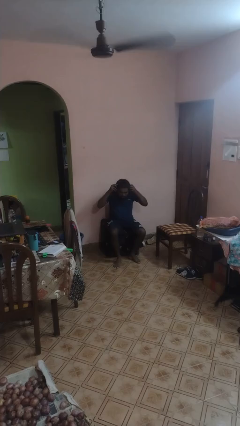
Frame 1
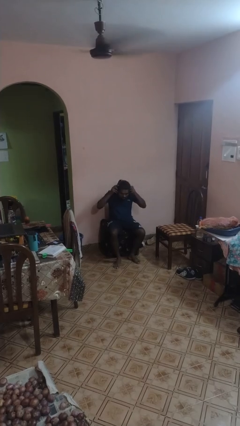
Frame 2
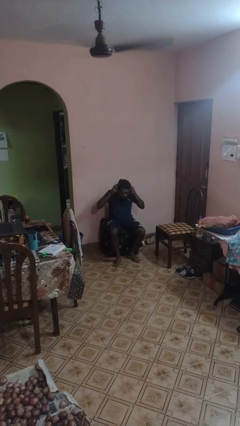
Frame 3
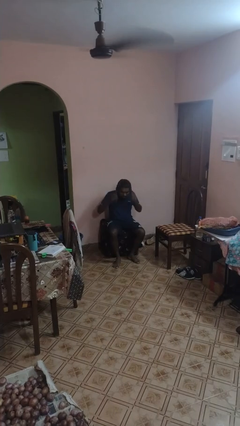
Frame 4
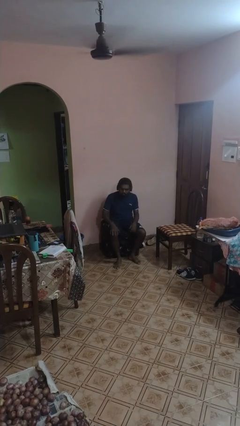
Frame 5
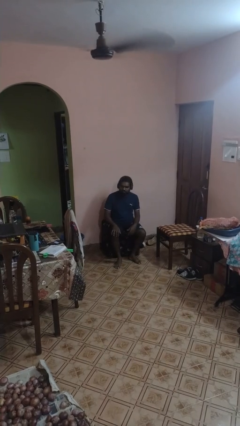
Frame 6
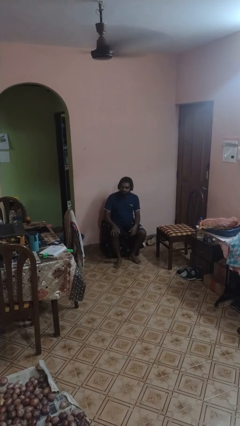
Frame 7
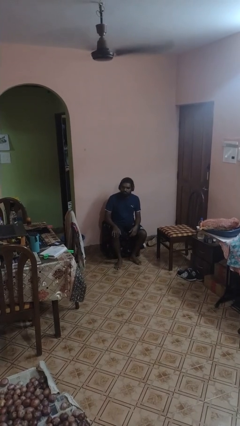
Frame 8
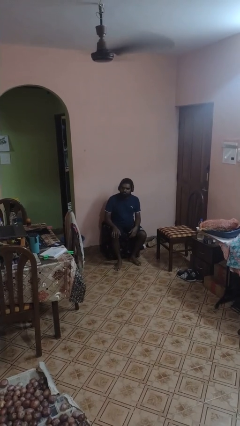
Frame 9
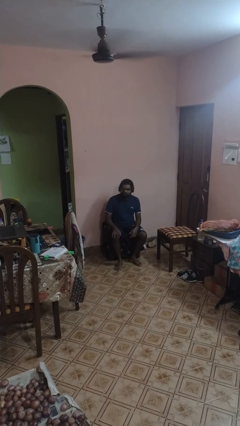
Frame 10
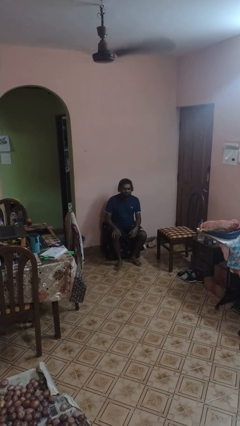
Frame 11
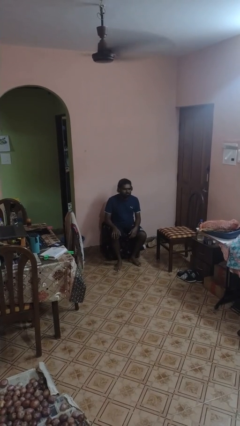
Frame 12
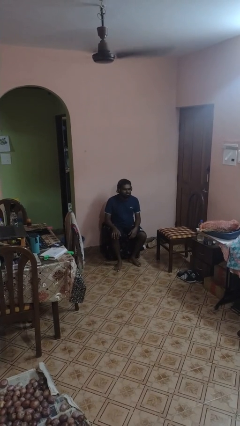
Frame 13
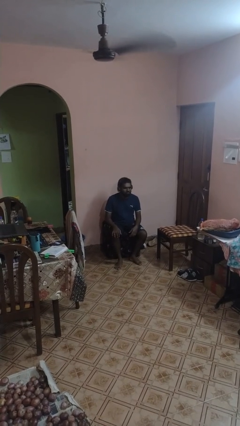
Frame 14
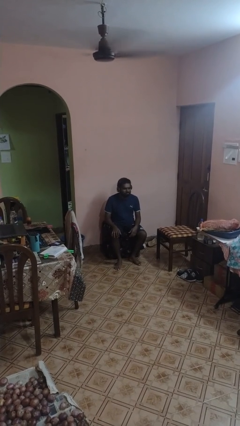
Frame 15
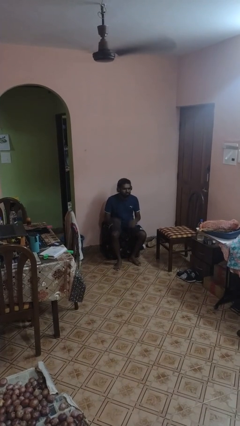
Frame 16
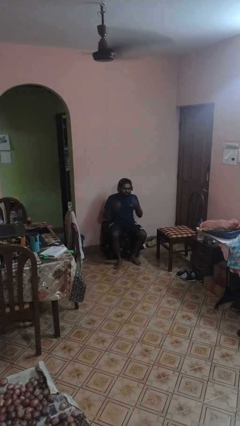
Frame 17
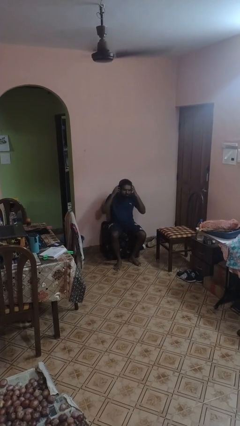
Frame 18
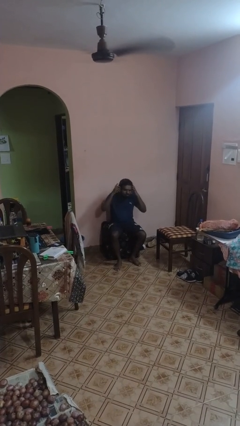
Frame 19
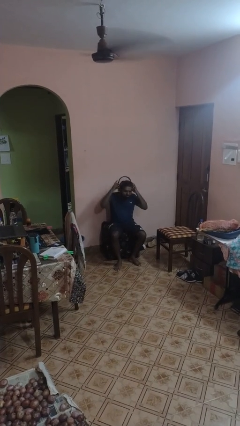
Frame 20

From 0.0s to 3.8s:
person puts on headphones

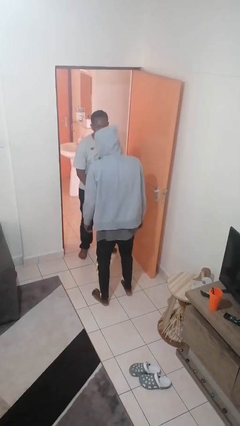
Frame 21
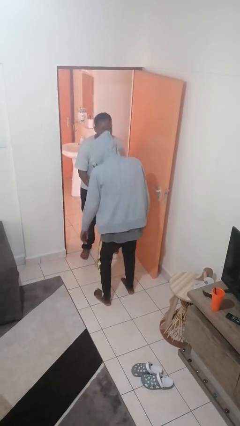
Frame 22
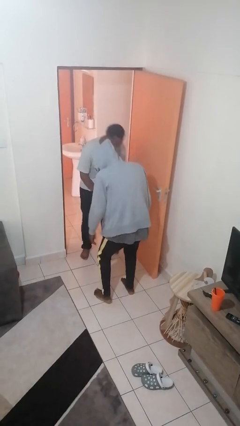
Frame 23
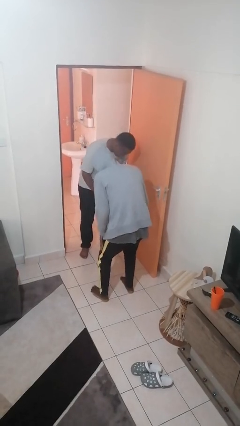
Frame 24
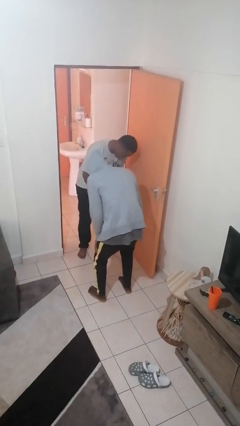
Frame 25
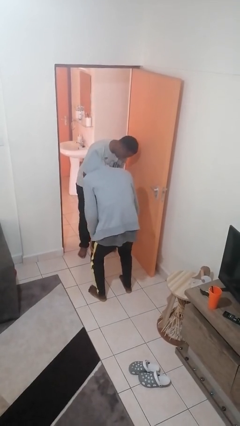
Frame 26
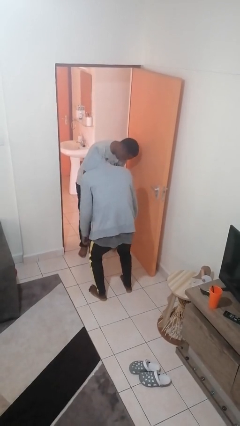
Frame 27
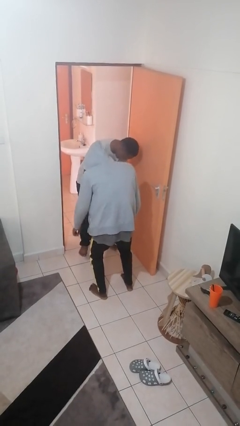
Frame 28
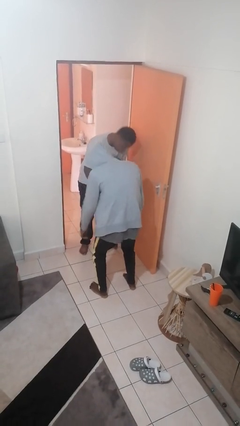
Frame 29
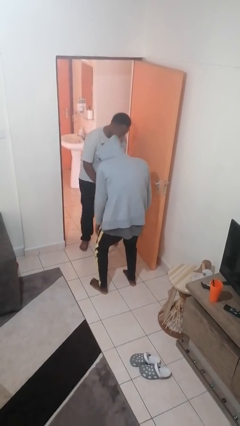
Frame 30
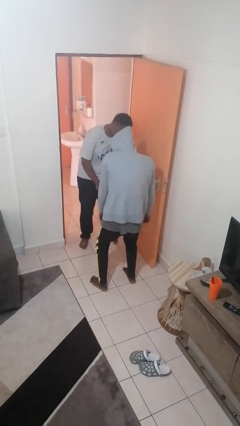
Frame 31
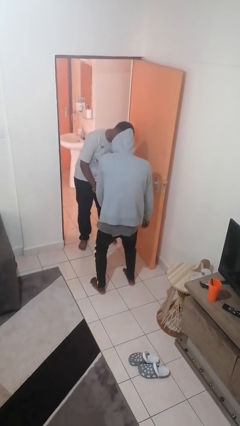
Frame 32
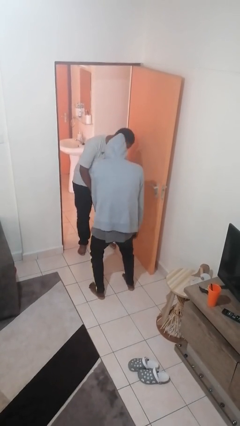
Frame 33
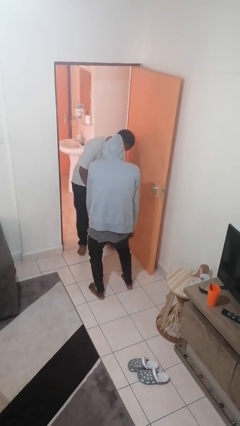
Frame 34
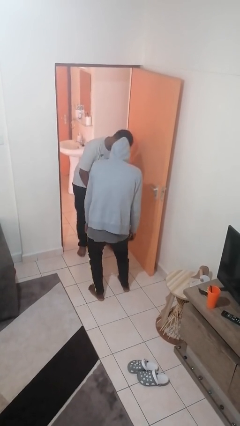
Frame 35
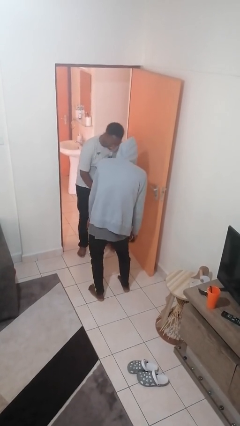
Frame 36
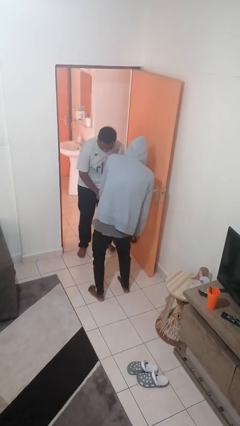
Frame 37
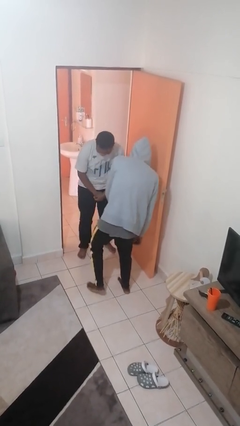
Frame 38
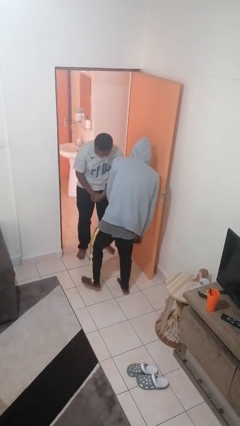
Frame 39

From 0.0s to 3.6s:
person laughs with person

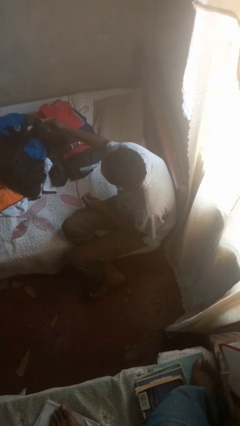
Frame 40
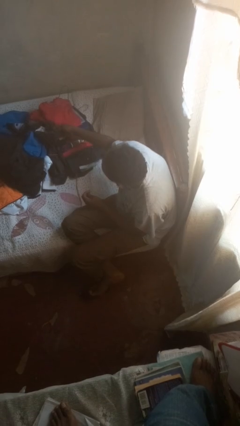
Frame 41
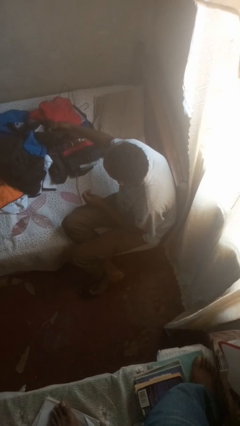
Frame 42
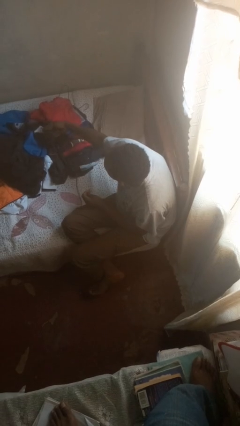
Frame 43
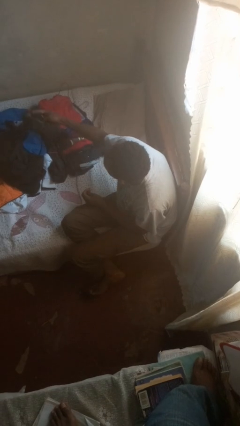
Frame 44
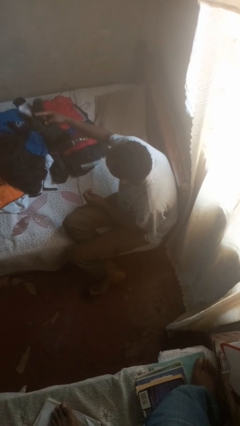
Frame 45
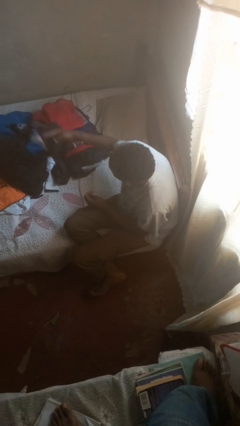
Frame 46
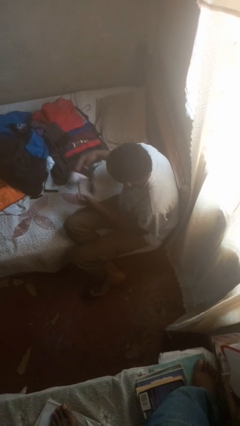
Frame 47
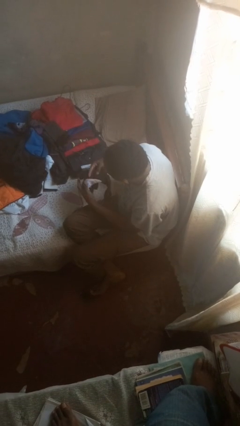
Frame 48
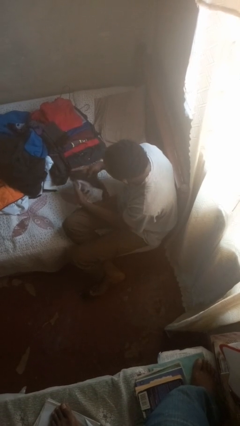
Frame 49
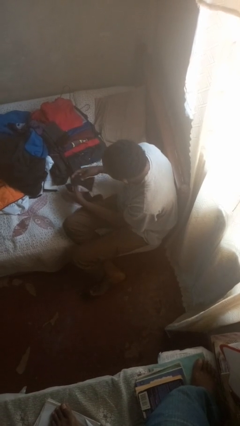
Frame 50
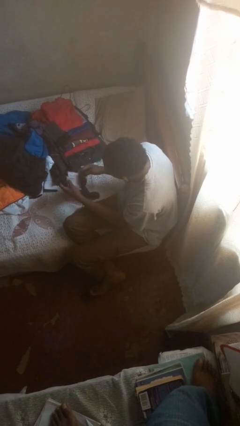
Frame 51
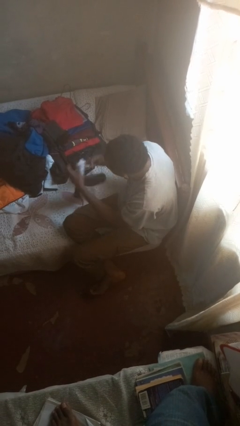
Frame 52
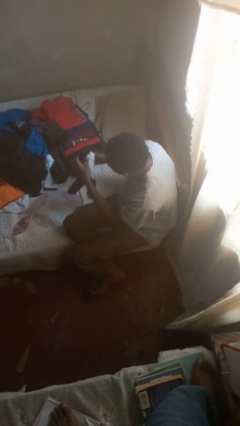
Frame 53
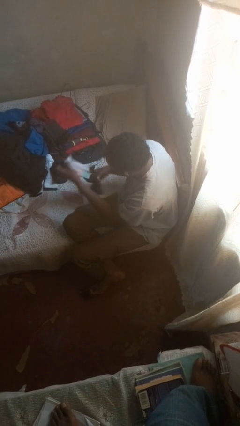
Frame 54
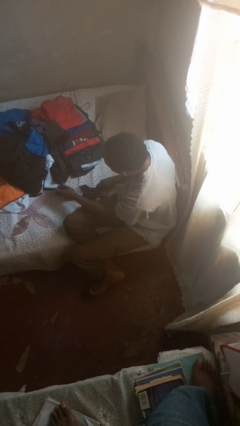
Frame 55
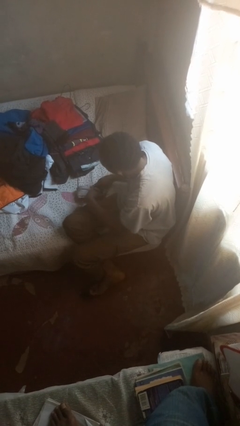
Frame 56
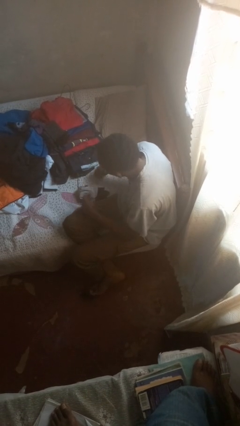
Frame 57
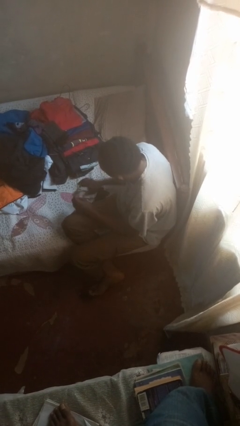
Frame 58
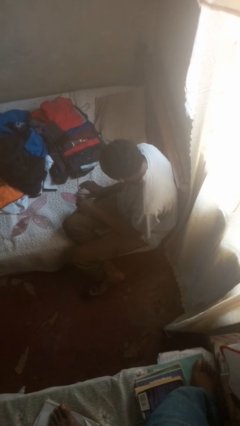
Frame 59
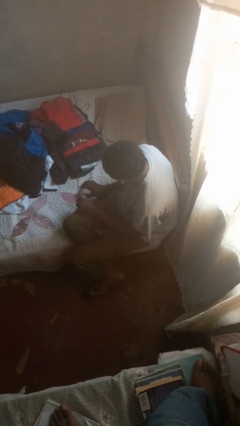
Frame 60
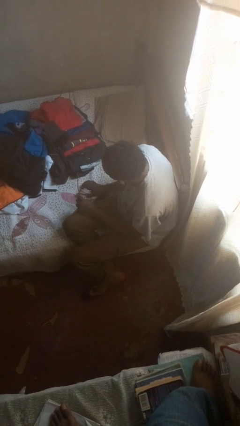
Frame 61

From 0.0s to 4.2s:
person folds socks

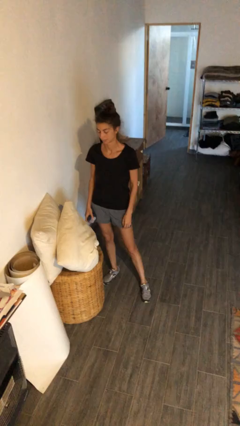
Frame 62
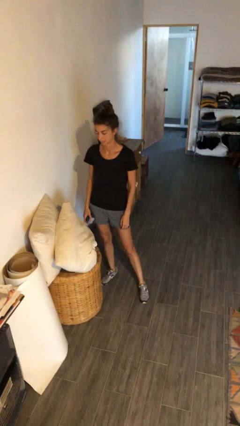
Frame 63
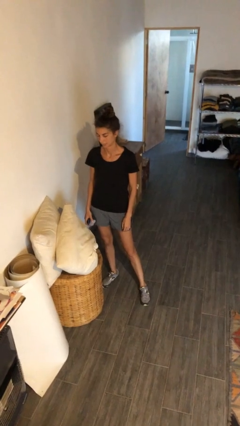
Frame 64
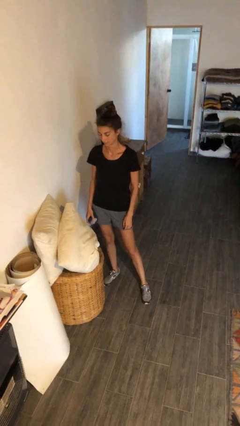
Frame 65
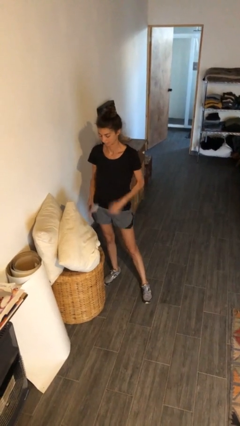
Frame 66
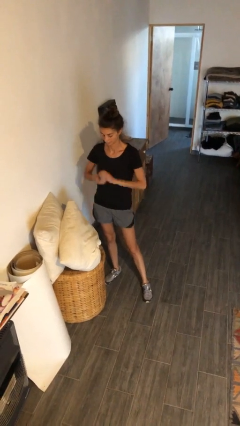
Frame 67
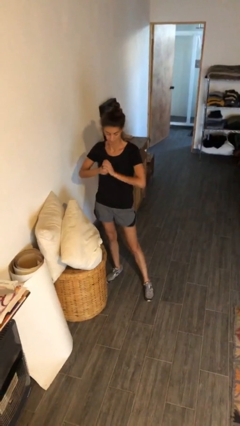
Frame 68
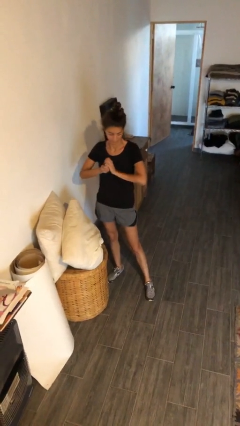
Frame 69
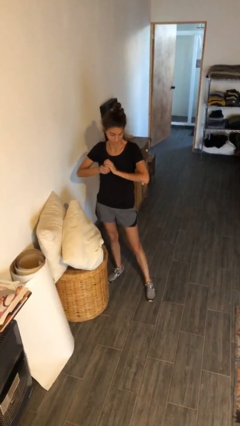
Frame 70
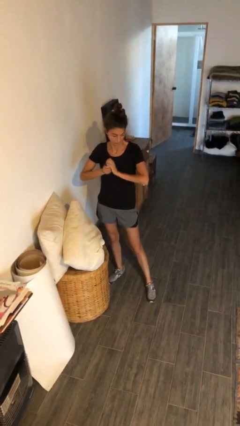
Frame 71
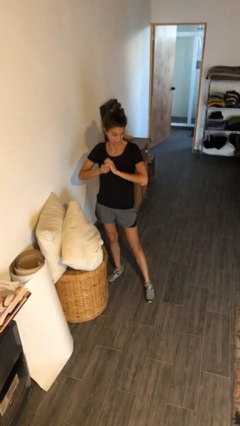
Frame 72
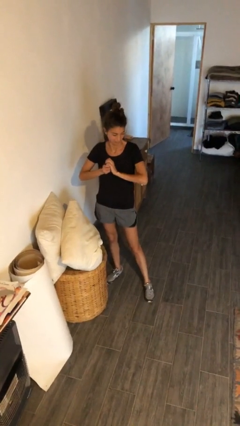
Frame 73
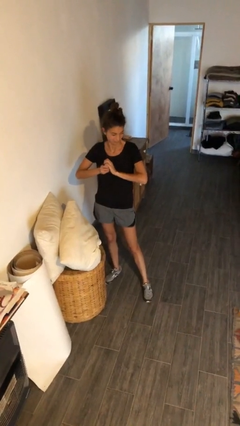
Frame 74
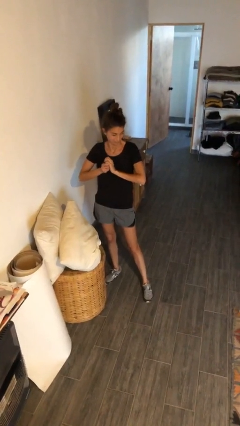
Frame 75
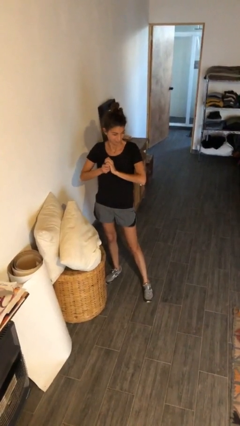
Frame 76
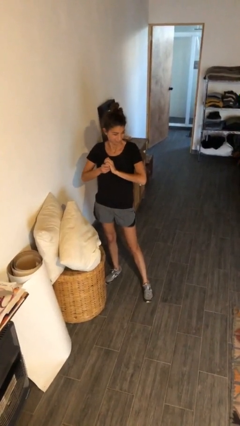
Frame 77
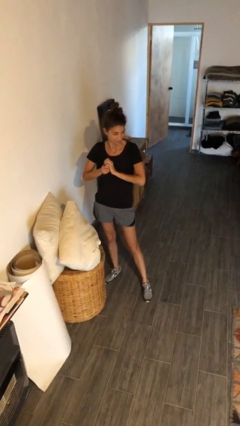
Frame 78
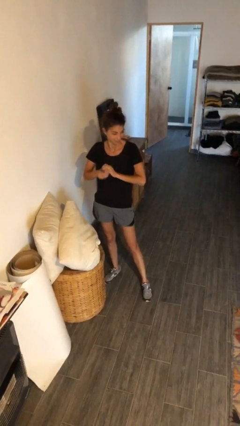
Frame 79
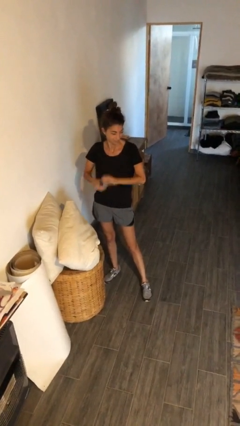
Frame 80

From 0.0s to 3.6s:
person squeezes object

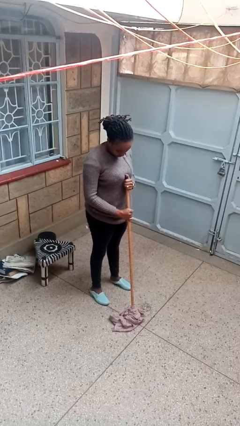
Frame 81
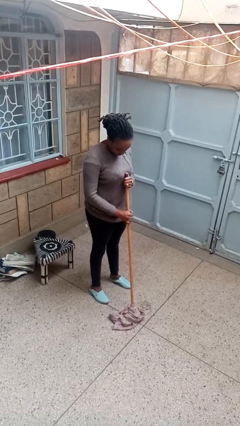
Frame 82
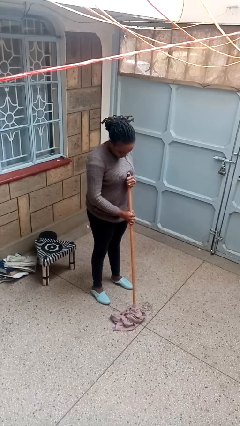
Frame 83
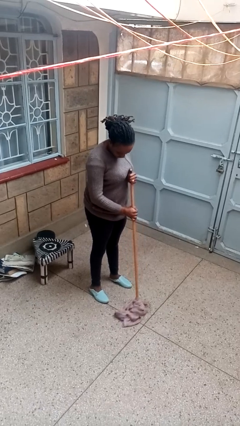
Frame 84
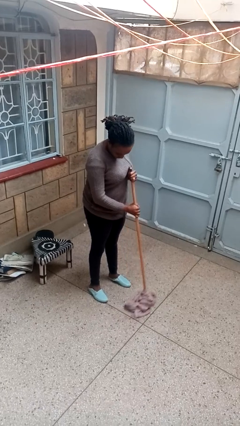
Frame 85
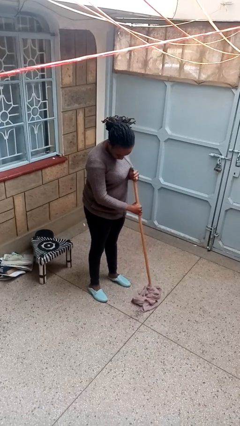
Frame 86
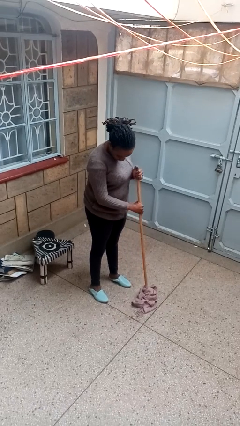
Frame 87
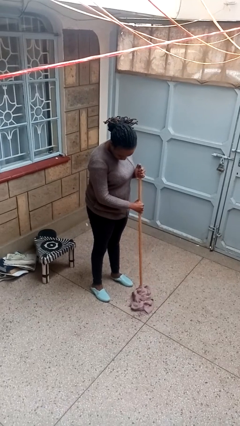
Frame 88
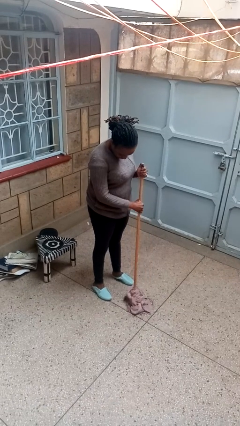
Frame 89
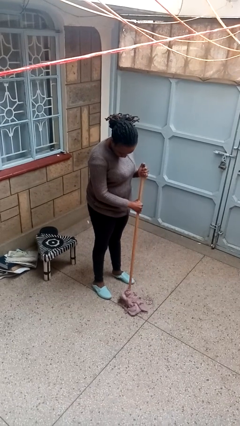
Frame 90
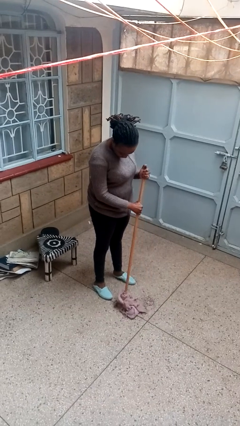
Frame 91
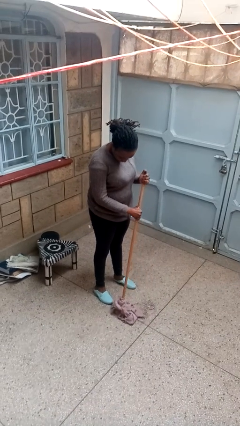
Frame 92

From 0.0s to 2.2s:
person mops
